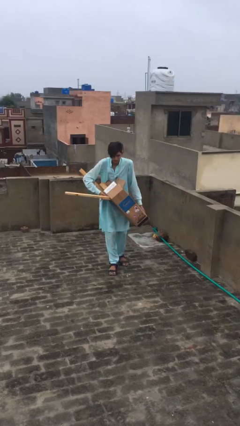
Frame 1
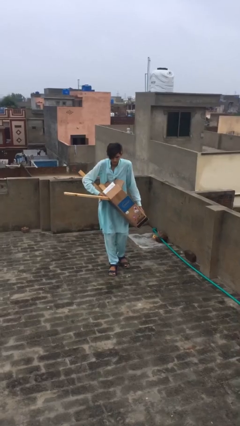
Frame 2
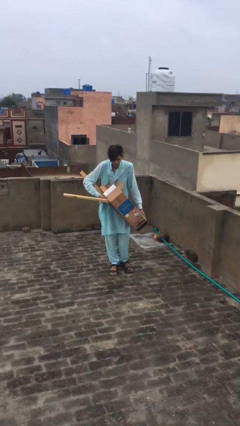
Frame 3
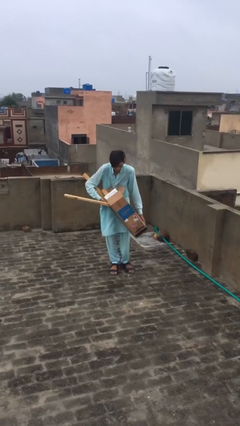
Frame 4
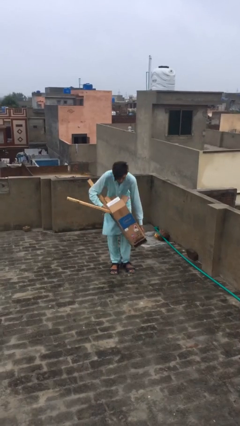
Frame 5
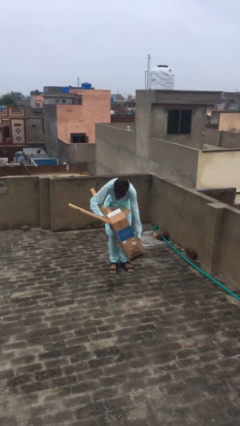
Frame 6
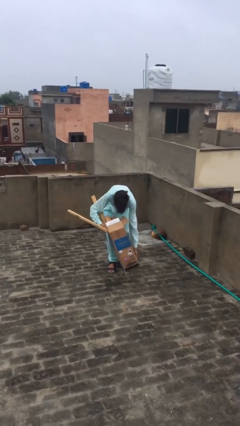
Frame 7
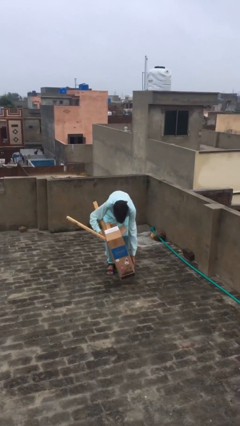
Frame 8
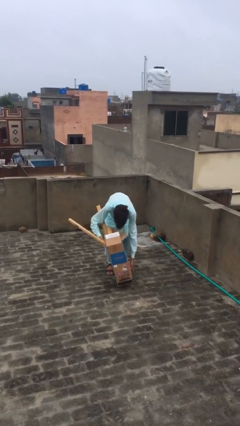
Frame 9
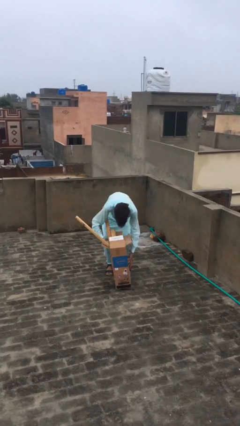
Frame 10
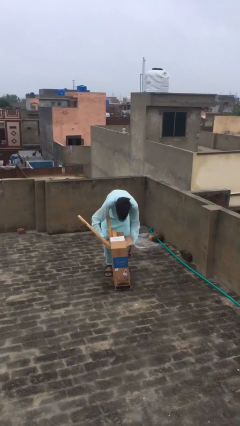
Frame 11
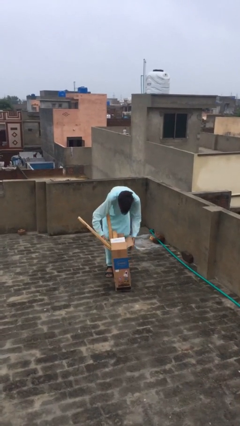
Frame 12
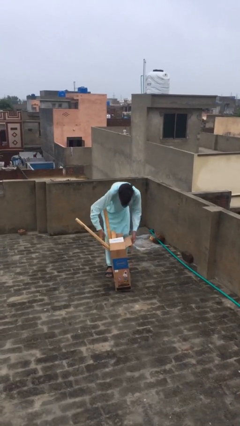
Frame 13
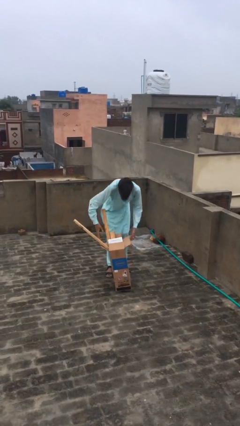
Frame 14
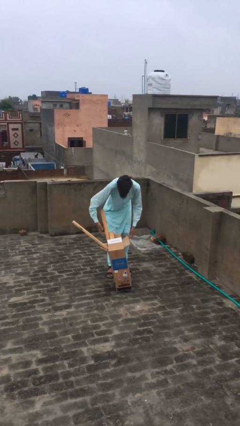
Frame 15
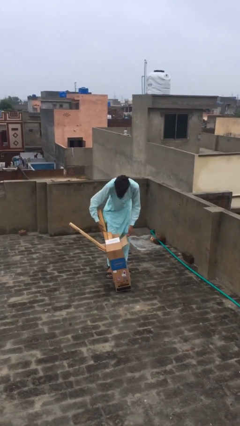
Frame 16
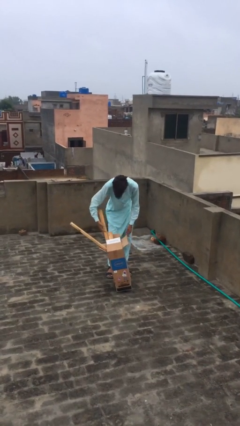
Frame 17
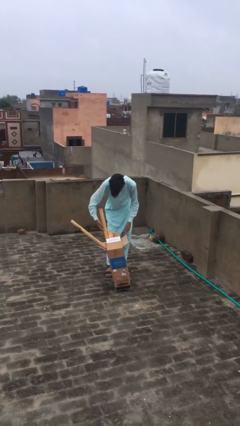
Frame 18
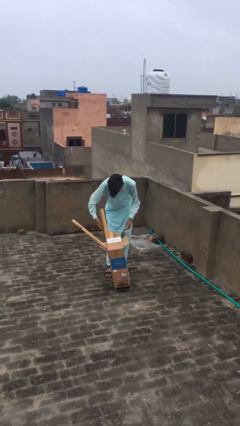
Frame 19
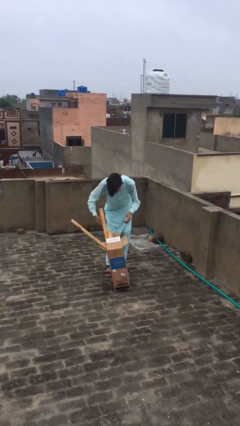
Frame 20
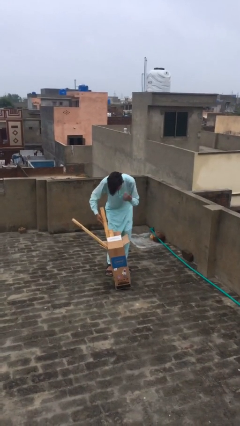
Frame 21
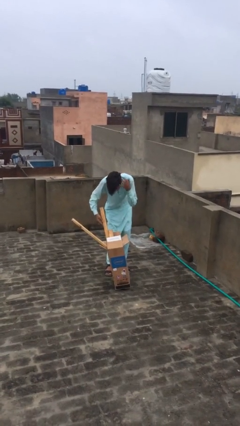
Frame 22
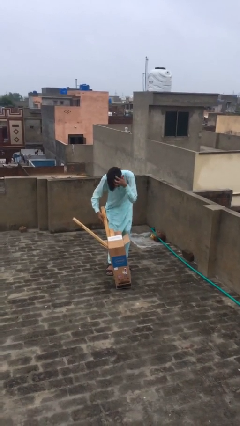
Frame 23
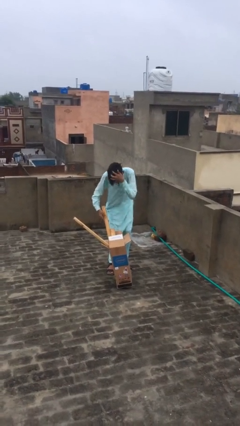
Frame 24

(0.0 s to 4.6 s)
person puts down object on floor

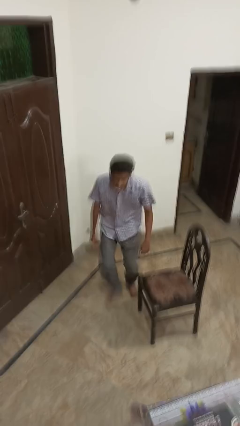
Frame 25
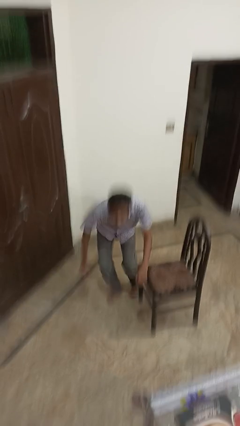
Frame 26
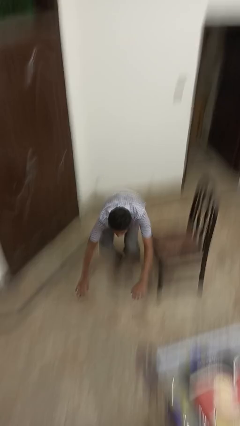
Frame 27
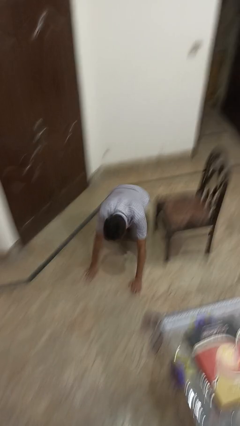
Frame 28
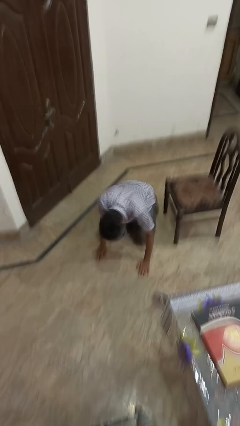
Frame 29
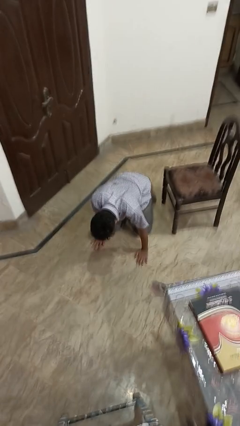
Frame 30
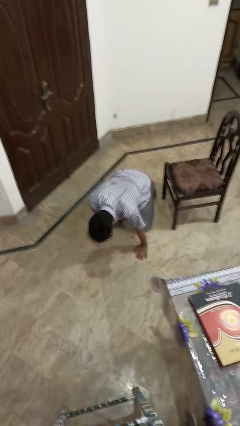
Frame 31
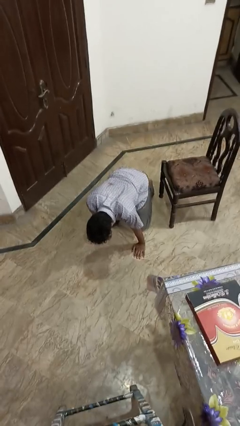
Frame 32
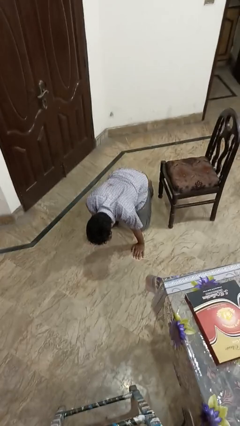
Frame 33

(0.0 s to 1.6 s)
person trips on object on floor

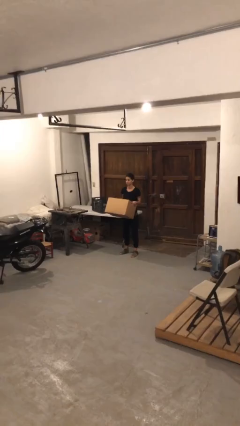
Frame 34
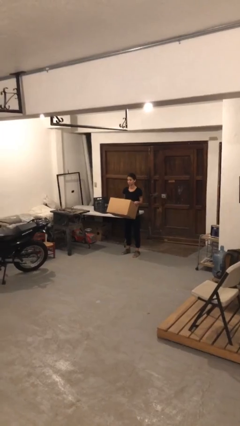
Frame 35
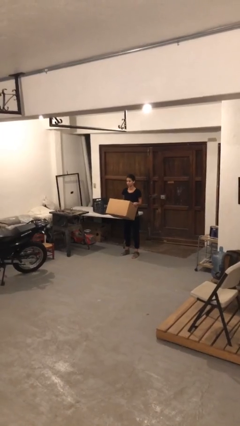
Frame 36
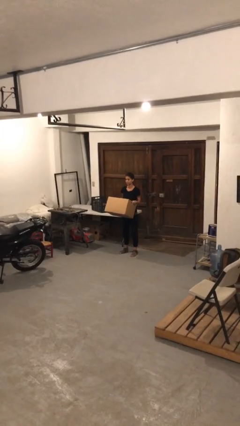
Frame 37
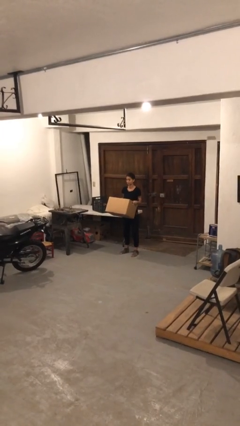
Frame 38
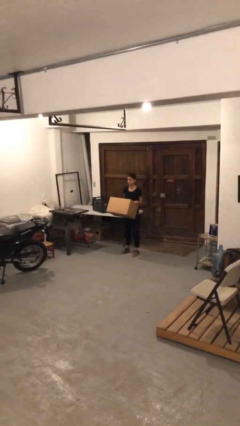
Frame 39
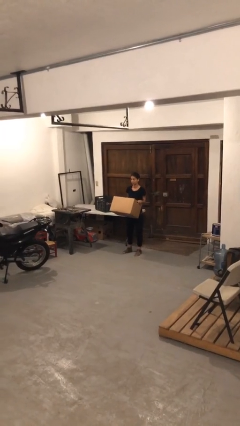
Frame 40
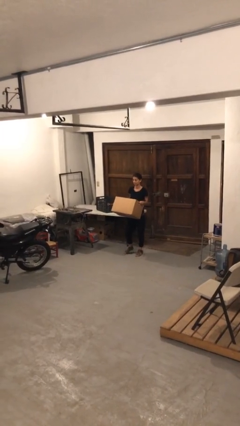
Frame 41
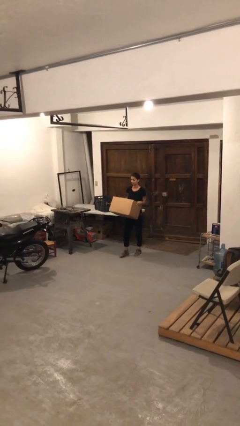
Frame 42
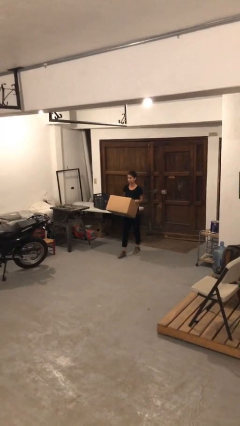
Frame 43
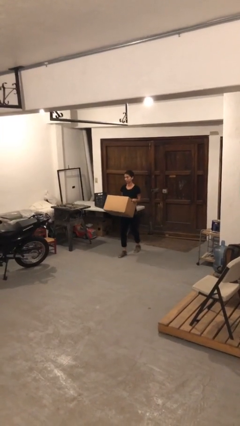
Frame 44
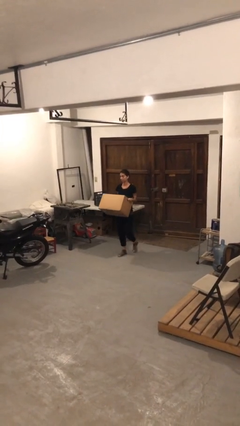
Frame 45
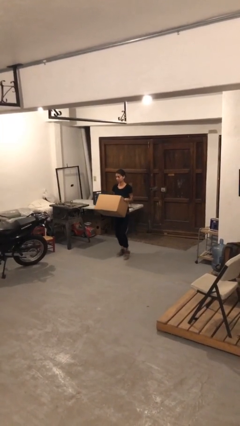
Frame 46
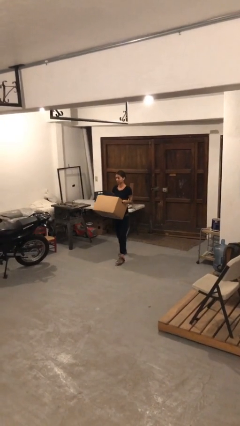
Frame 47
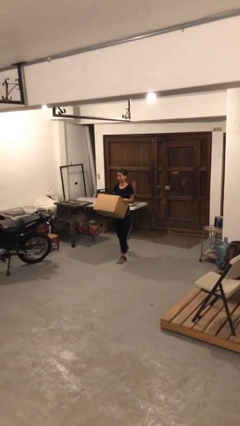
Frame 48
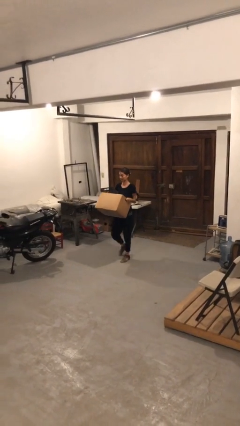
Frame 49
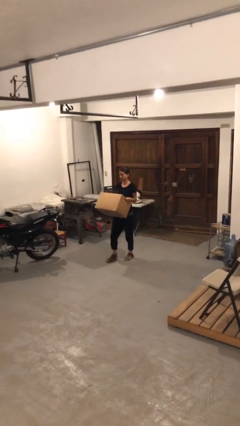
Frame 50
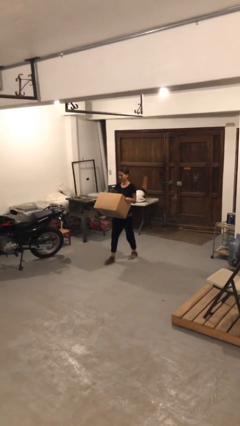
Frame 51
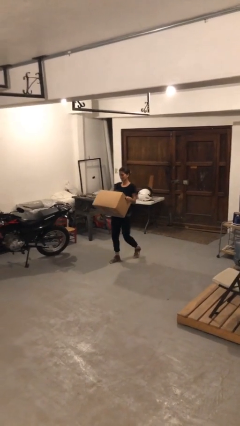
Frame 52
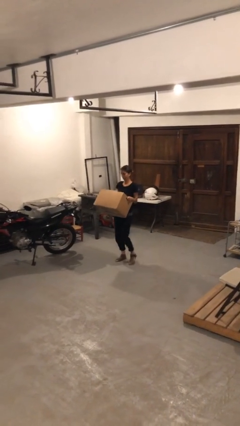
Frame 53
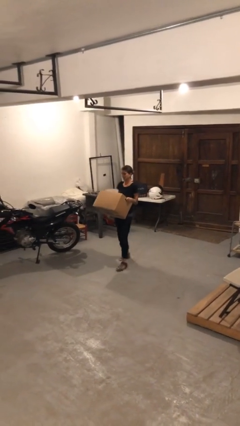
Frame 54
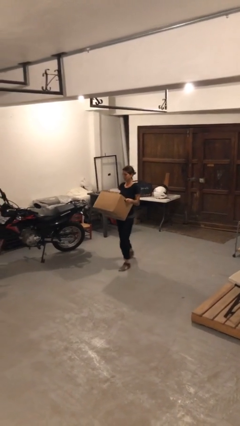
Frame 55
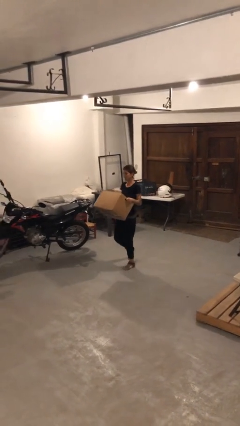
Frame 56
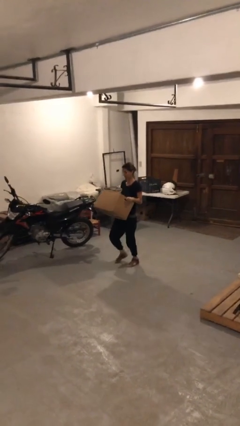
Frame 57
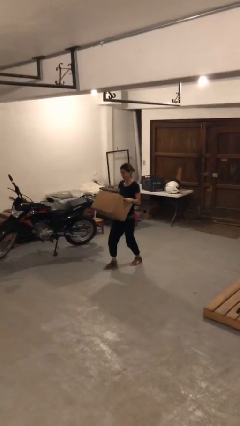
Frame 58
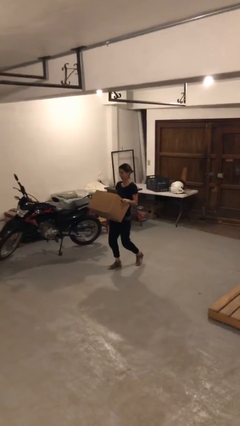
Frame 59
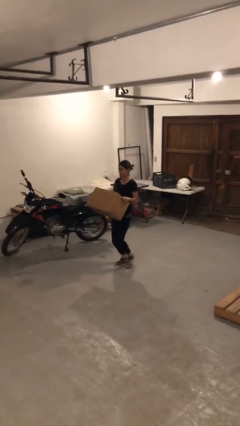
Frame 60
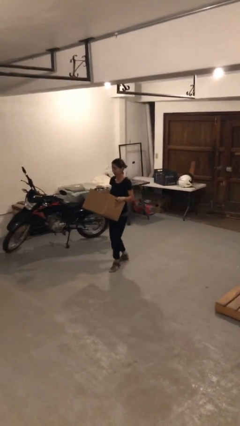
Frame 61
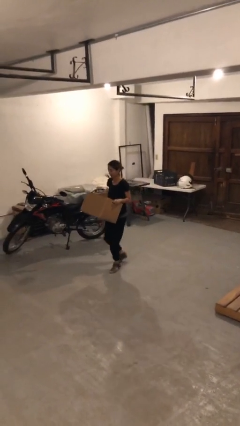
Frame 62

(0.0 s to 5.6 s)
person carries heavy object

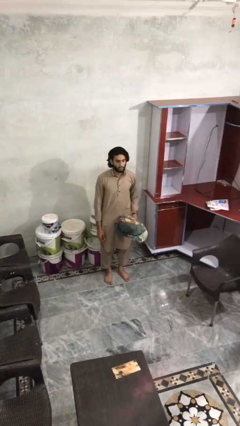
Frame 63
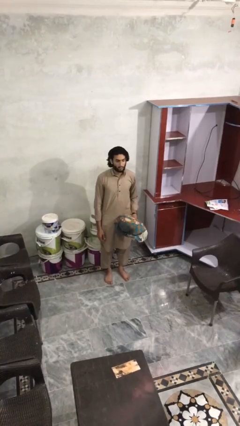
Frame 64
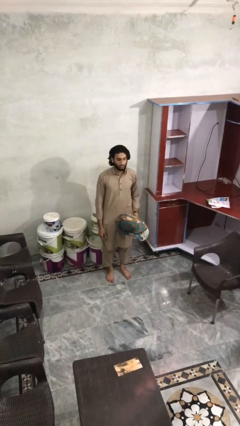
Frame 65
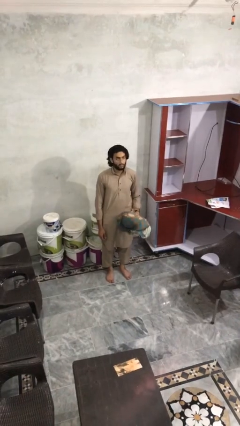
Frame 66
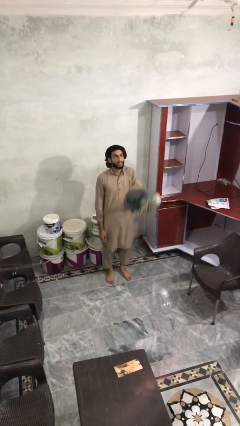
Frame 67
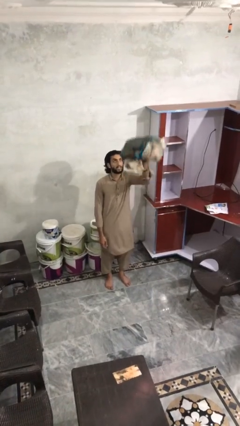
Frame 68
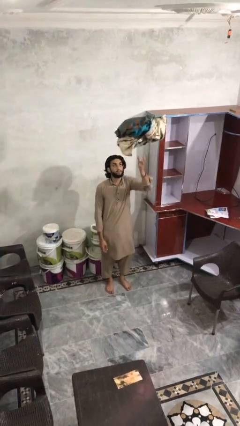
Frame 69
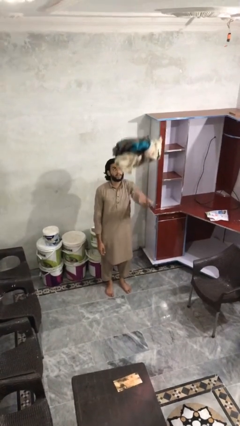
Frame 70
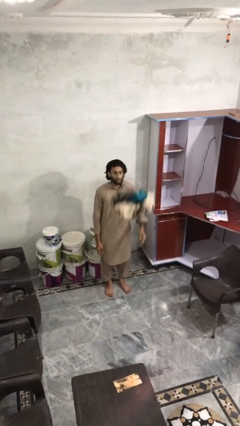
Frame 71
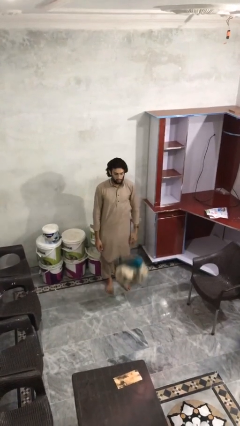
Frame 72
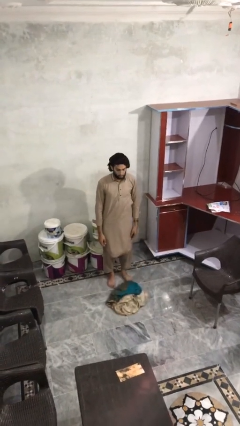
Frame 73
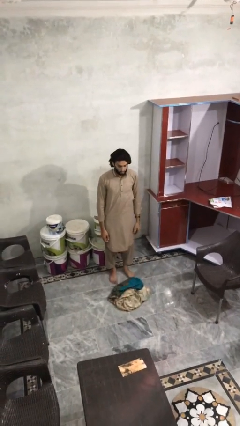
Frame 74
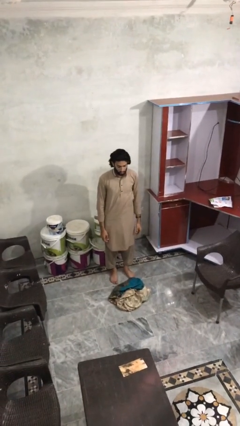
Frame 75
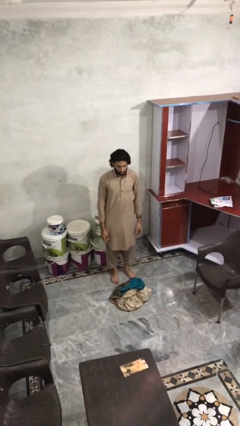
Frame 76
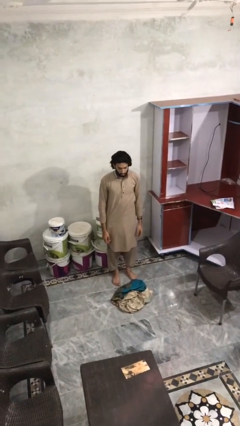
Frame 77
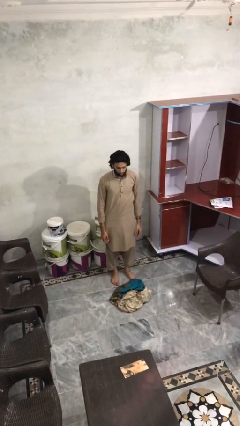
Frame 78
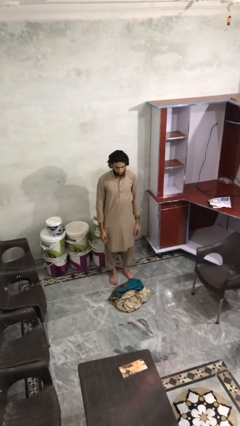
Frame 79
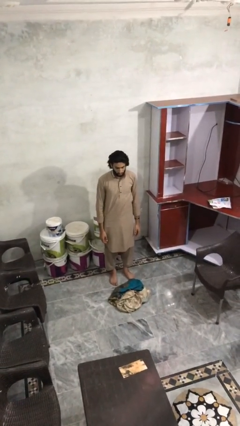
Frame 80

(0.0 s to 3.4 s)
person throws object into air

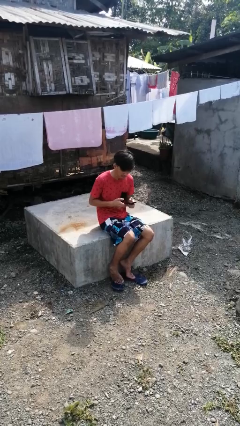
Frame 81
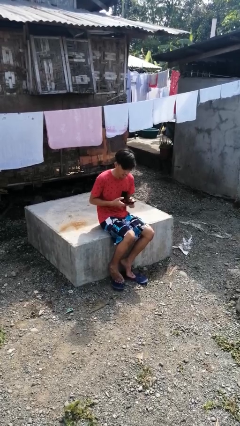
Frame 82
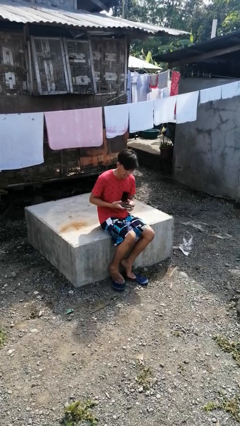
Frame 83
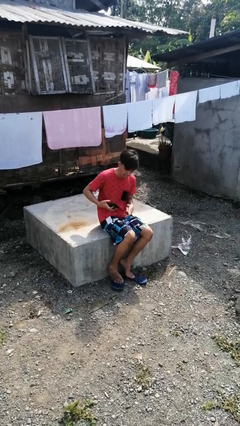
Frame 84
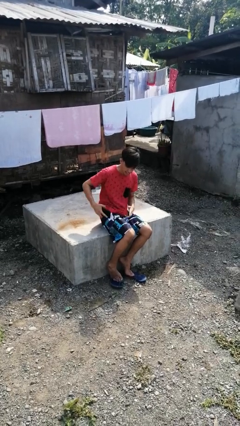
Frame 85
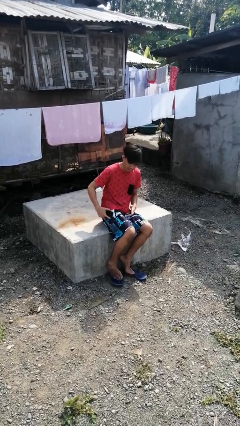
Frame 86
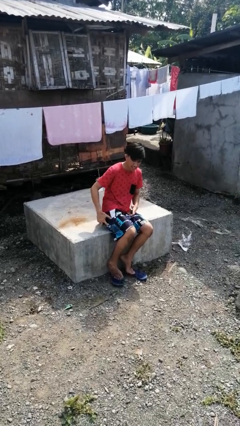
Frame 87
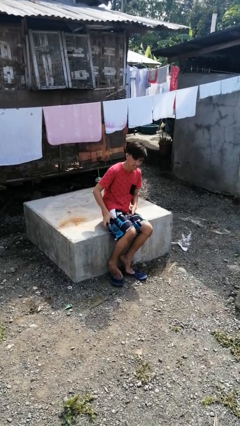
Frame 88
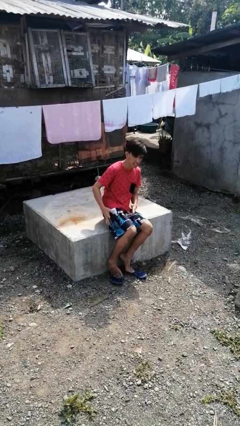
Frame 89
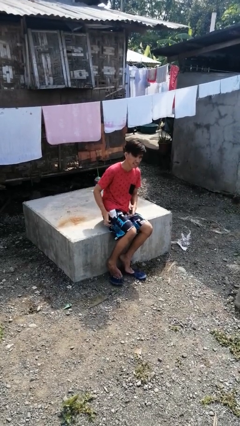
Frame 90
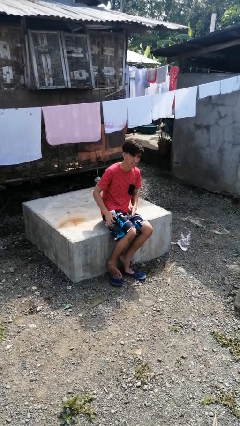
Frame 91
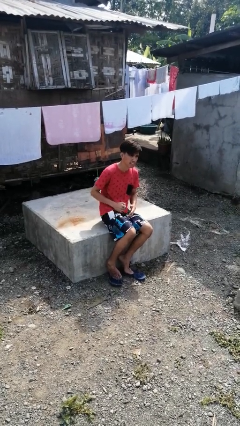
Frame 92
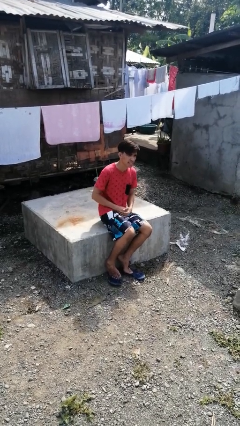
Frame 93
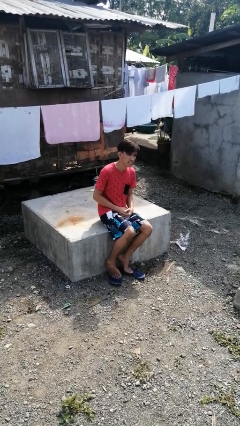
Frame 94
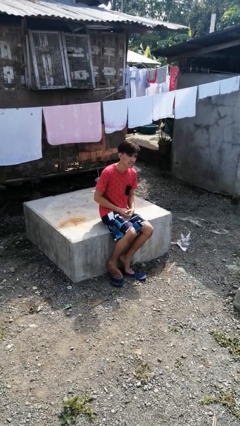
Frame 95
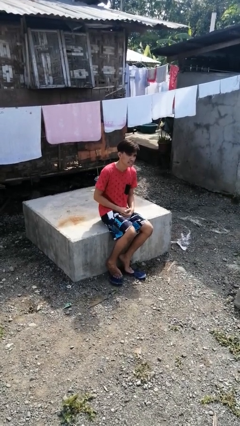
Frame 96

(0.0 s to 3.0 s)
person puts phone into pocket
